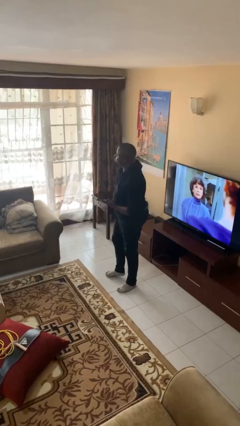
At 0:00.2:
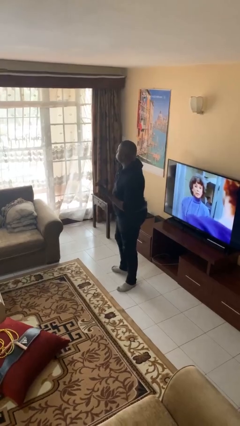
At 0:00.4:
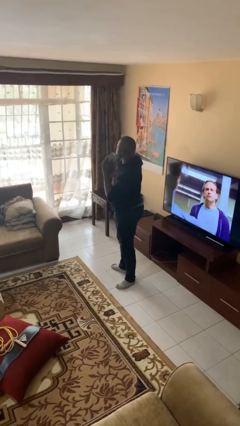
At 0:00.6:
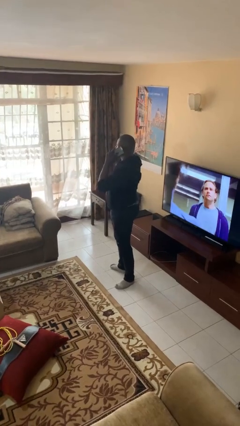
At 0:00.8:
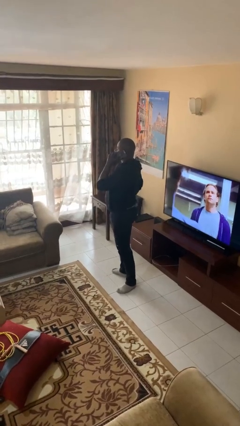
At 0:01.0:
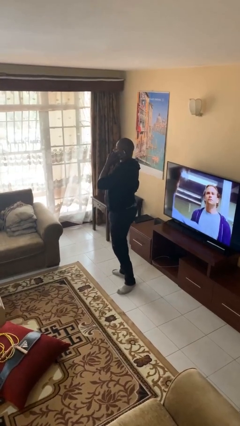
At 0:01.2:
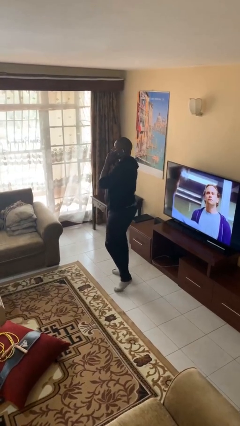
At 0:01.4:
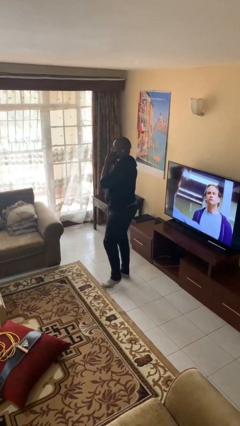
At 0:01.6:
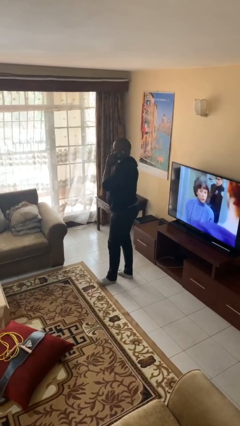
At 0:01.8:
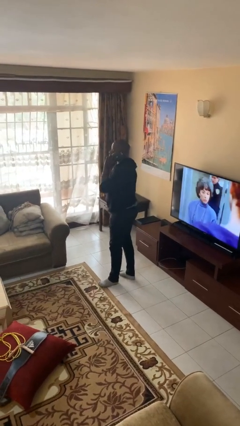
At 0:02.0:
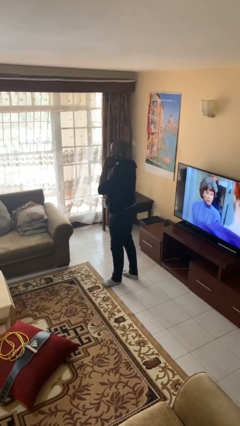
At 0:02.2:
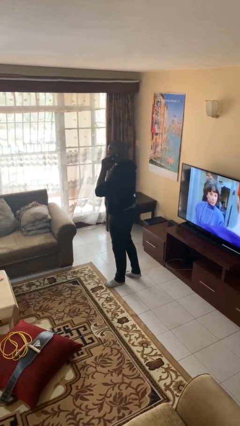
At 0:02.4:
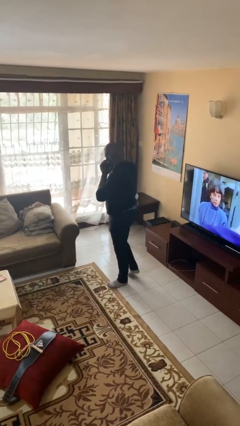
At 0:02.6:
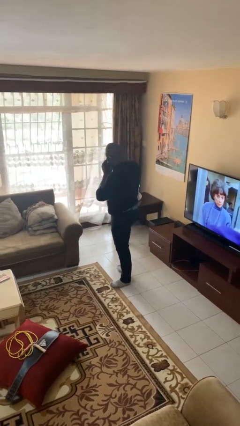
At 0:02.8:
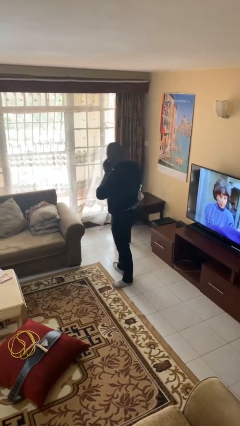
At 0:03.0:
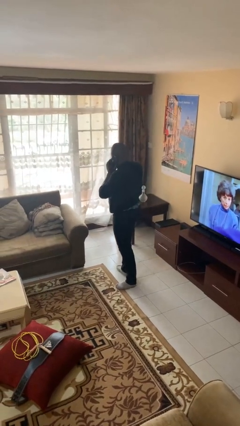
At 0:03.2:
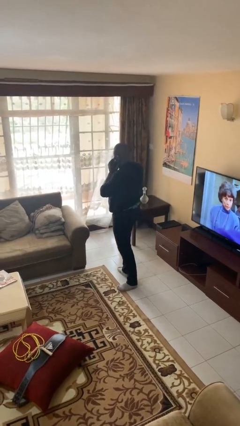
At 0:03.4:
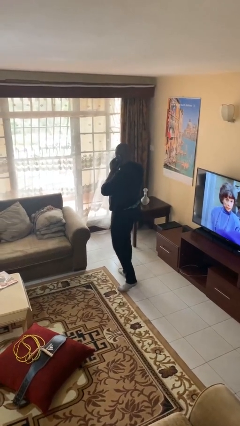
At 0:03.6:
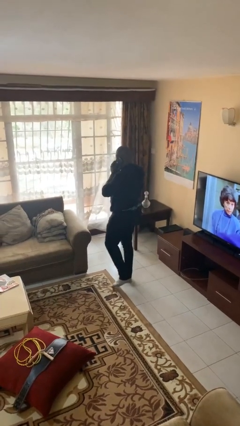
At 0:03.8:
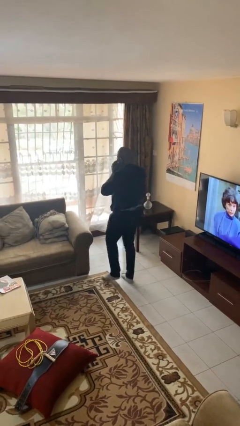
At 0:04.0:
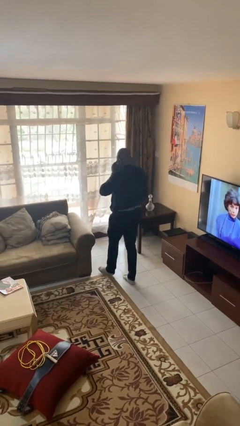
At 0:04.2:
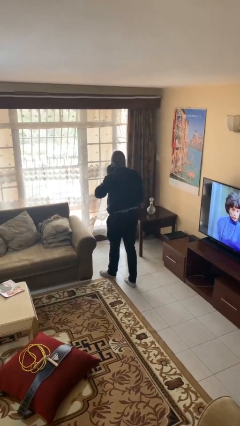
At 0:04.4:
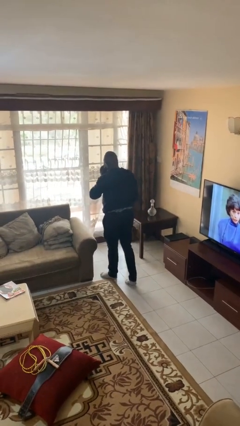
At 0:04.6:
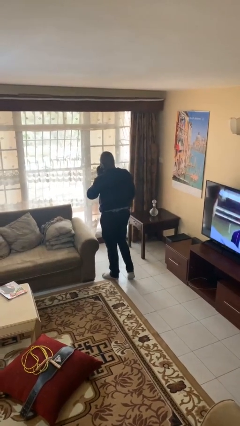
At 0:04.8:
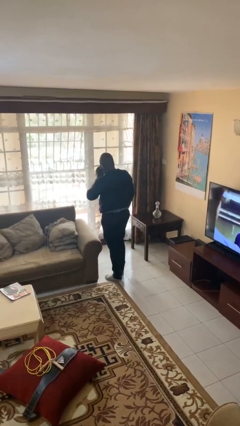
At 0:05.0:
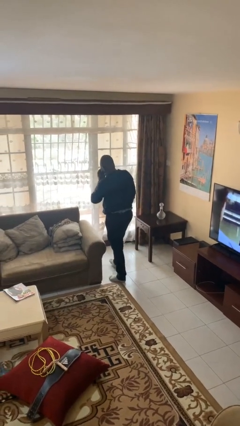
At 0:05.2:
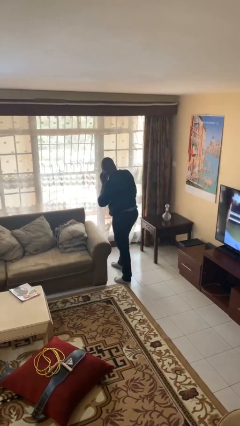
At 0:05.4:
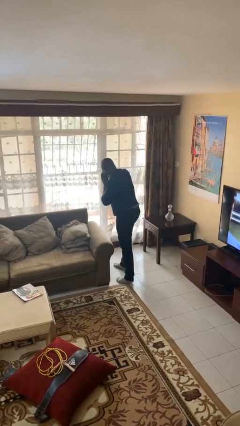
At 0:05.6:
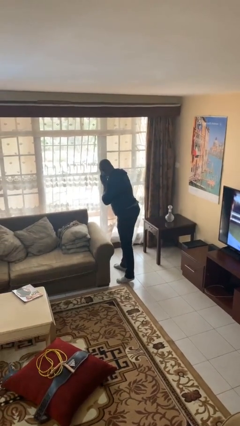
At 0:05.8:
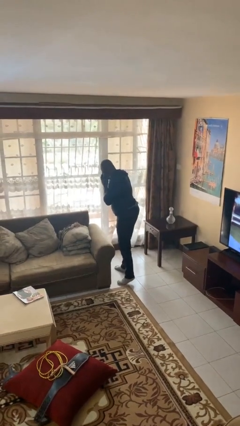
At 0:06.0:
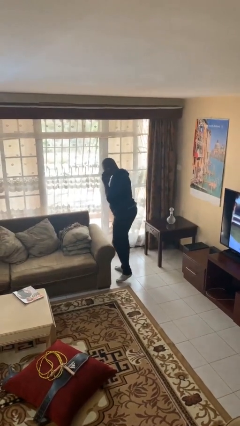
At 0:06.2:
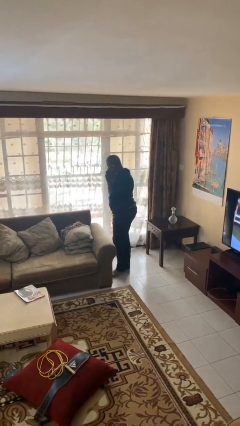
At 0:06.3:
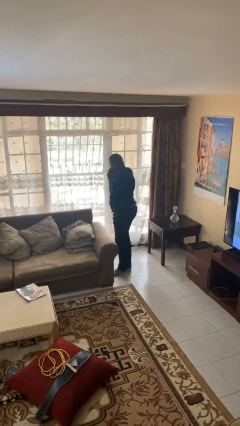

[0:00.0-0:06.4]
person talks on phone

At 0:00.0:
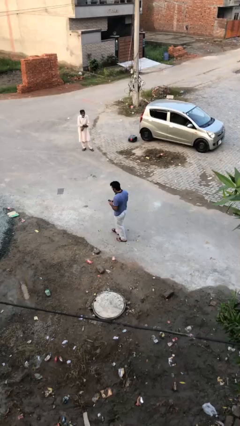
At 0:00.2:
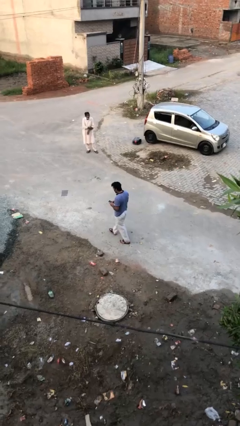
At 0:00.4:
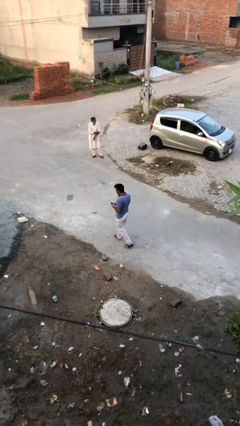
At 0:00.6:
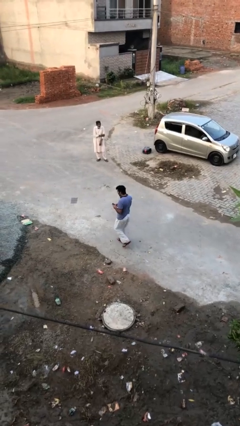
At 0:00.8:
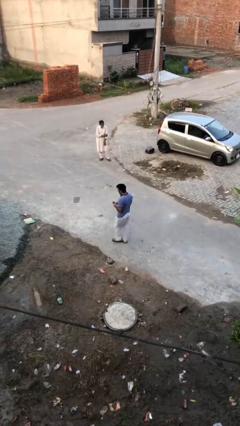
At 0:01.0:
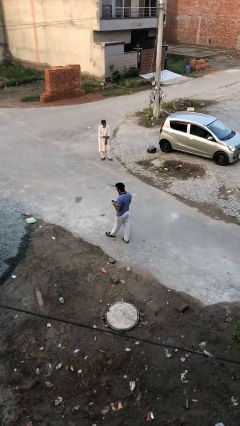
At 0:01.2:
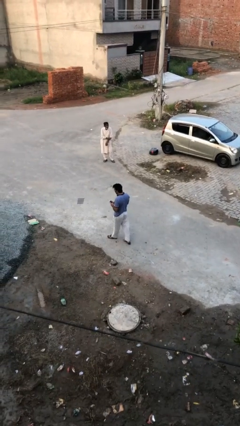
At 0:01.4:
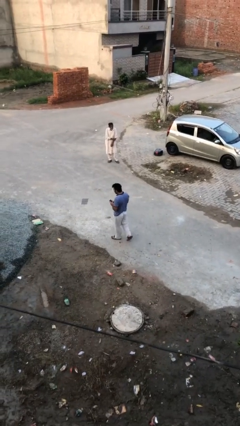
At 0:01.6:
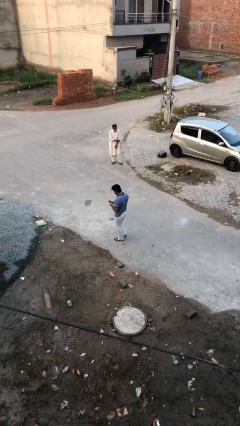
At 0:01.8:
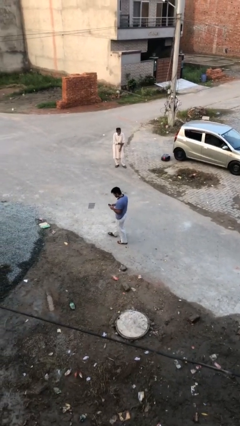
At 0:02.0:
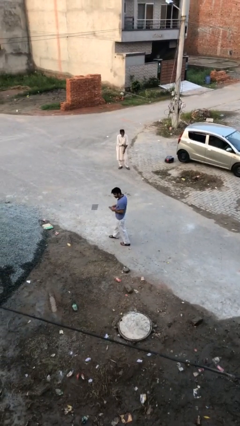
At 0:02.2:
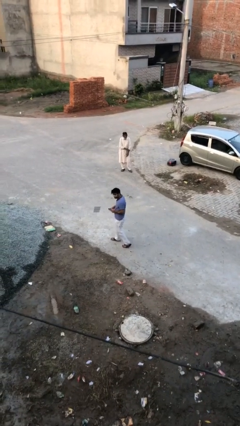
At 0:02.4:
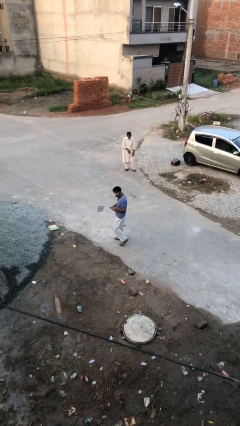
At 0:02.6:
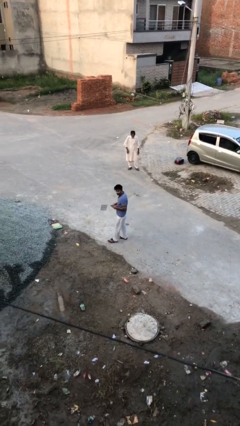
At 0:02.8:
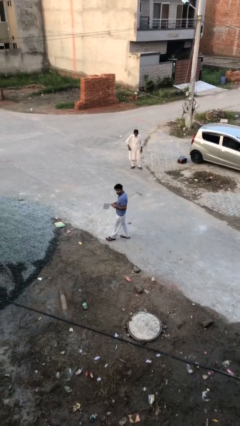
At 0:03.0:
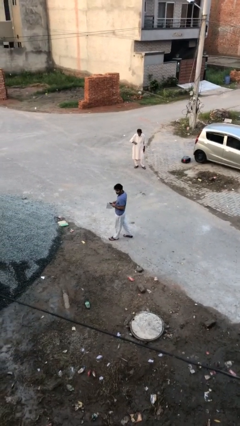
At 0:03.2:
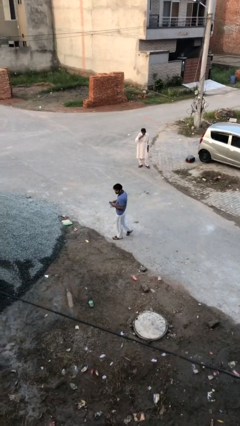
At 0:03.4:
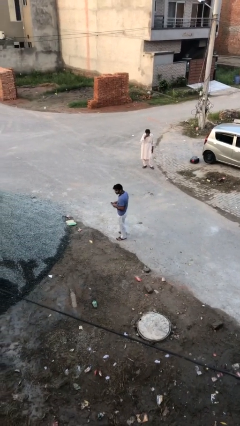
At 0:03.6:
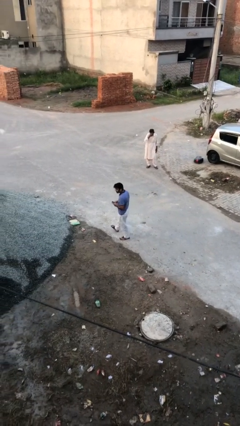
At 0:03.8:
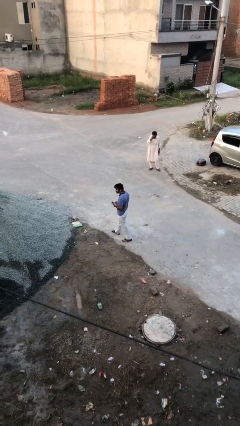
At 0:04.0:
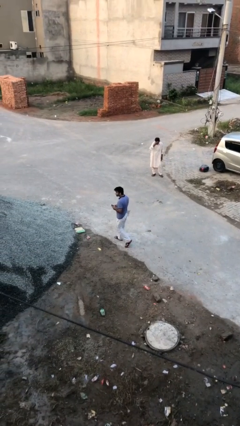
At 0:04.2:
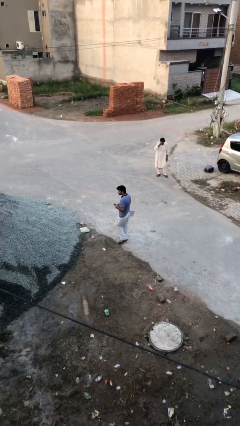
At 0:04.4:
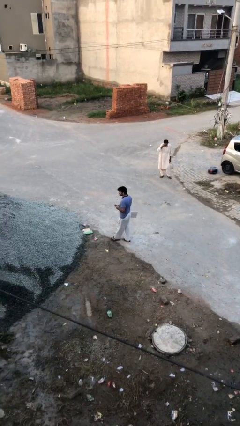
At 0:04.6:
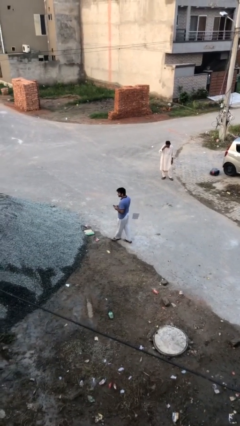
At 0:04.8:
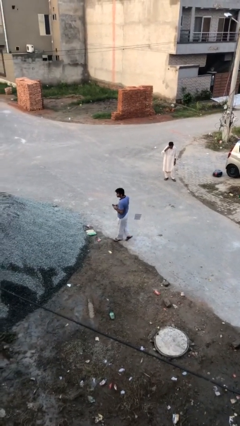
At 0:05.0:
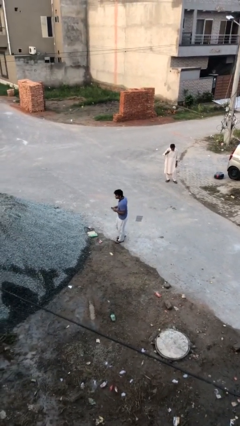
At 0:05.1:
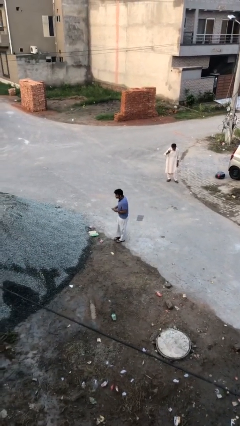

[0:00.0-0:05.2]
person texts on phone

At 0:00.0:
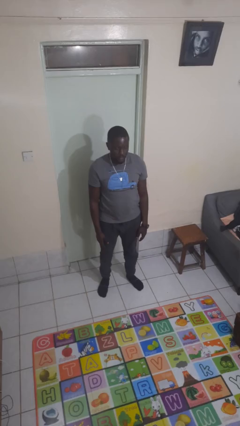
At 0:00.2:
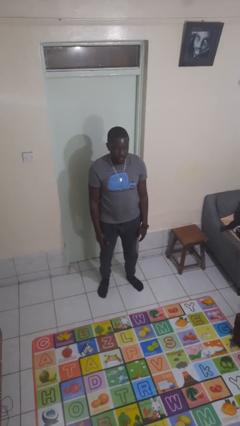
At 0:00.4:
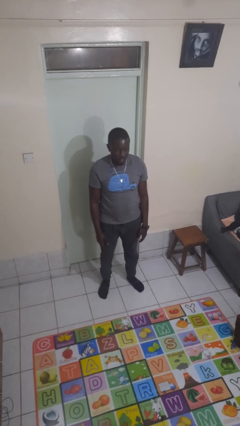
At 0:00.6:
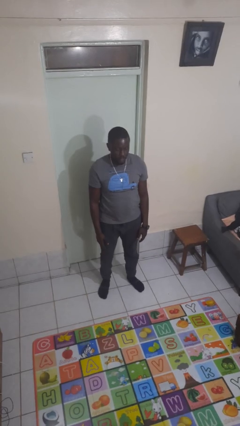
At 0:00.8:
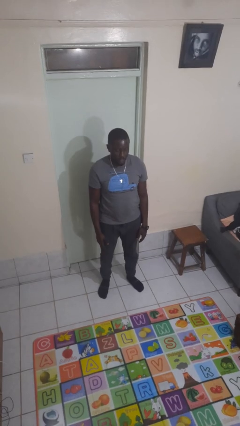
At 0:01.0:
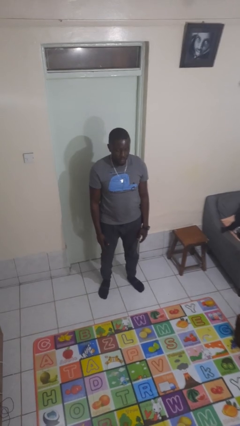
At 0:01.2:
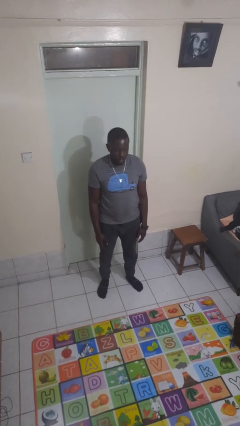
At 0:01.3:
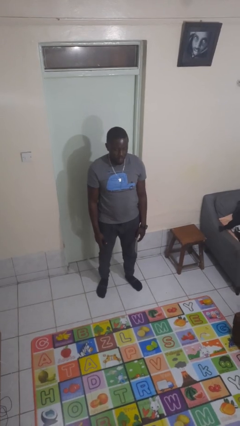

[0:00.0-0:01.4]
person stands up

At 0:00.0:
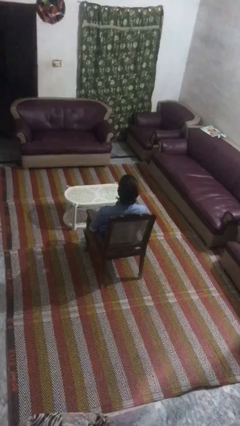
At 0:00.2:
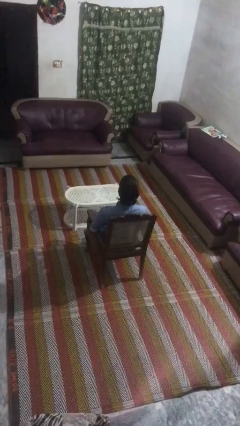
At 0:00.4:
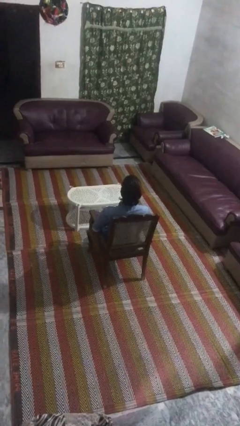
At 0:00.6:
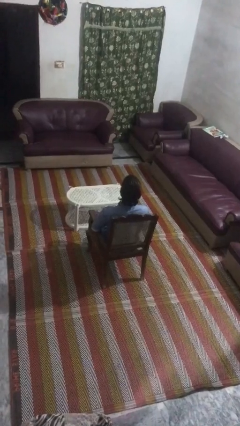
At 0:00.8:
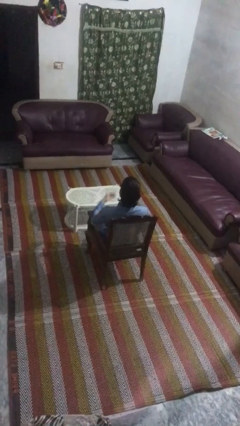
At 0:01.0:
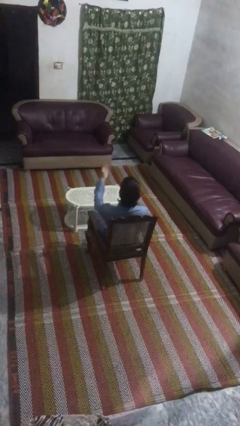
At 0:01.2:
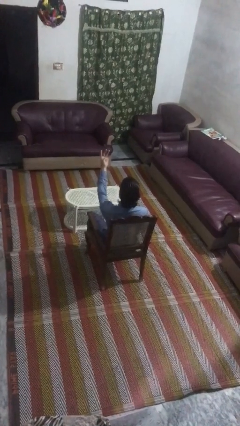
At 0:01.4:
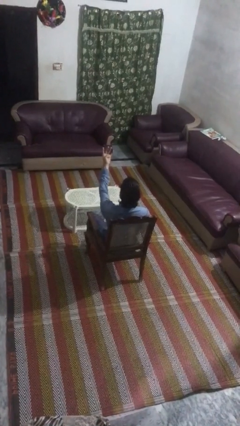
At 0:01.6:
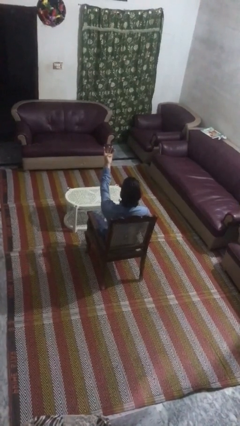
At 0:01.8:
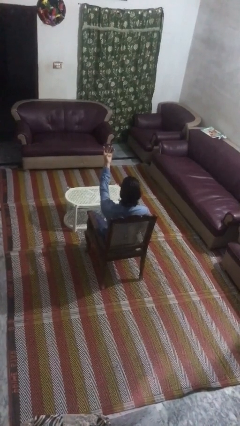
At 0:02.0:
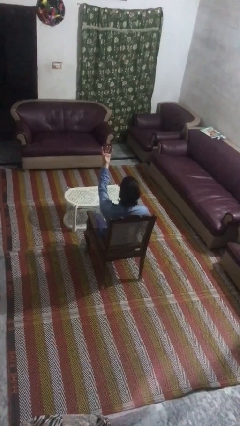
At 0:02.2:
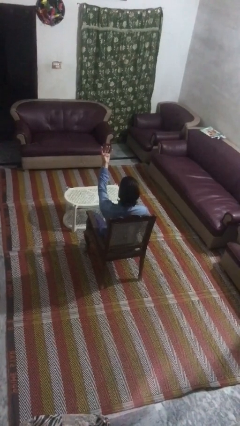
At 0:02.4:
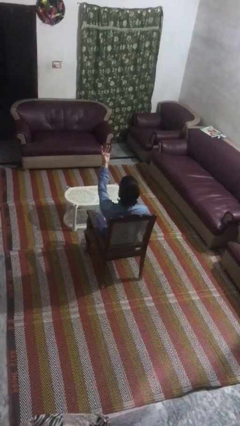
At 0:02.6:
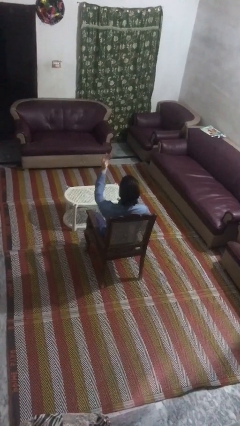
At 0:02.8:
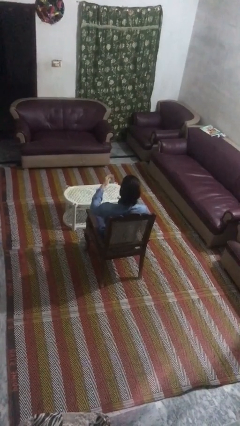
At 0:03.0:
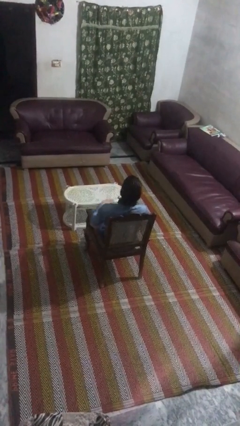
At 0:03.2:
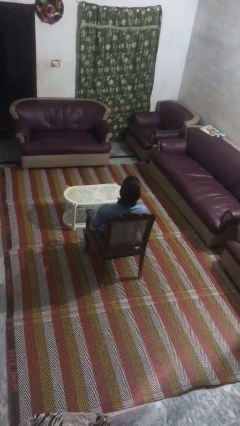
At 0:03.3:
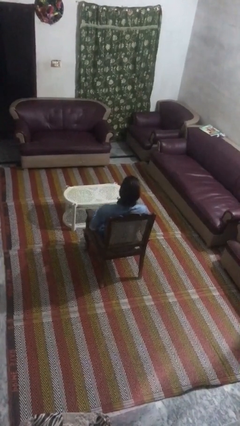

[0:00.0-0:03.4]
person gestures number four

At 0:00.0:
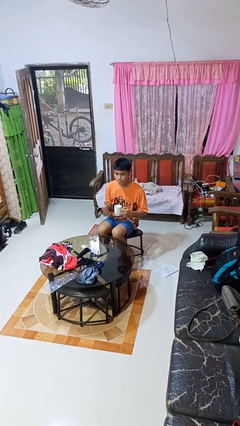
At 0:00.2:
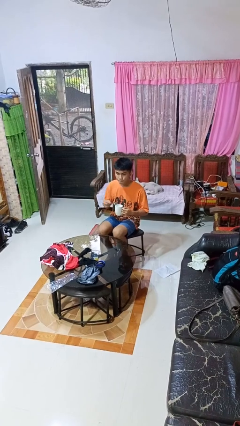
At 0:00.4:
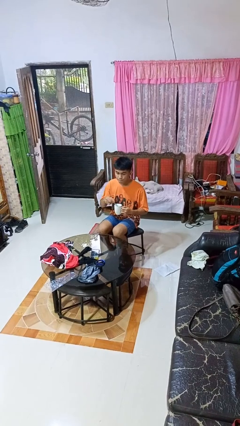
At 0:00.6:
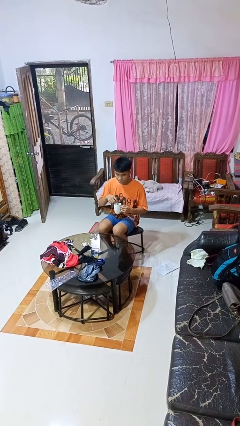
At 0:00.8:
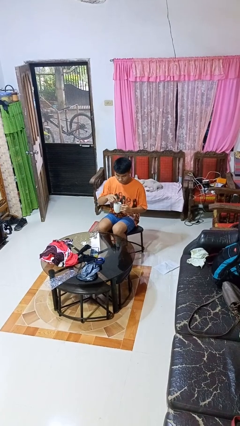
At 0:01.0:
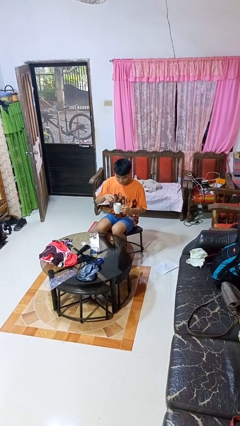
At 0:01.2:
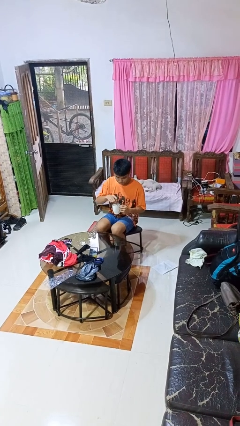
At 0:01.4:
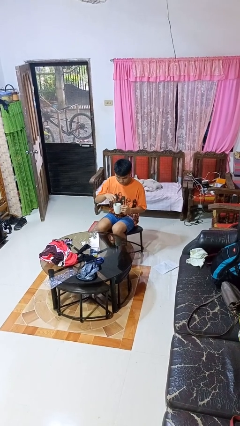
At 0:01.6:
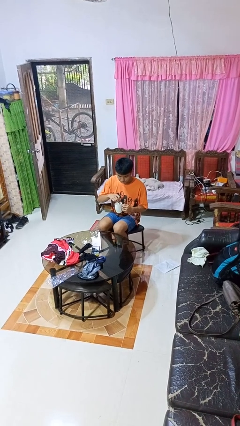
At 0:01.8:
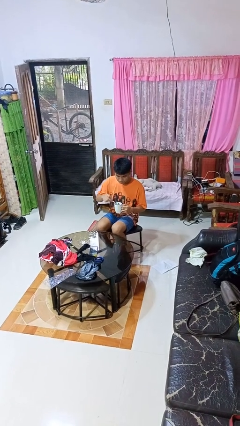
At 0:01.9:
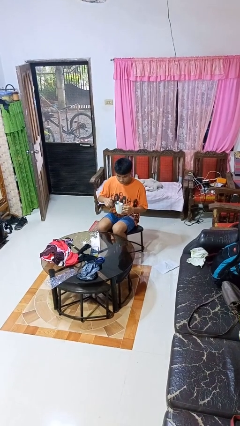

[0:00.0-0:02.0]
person stirs mug
